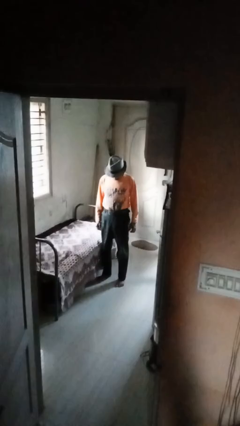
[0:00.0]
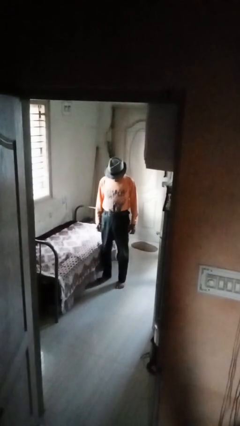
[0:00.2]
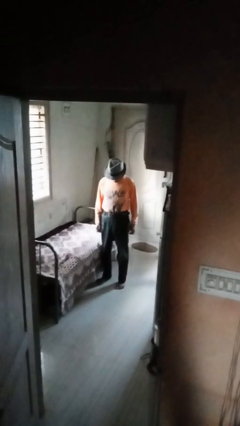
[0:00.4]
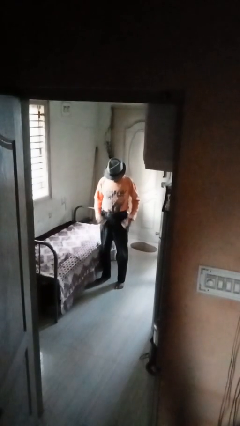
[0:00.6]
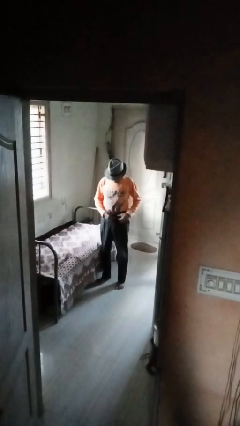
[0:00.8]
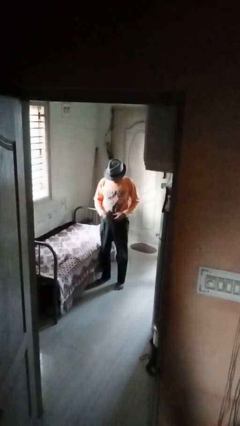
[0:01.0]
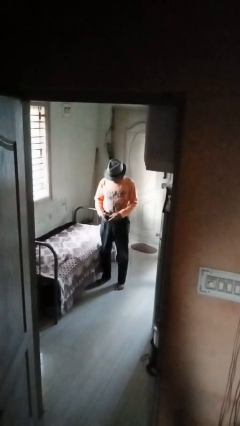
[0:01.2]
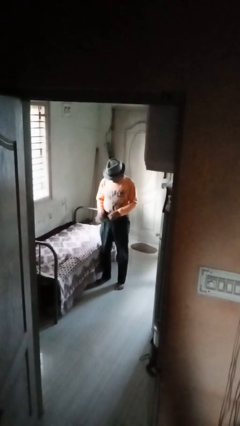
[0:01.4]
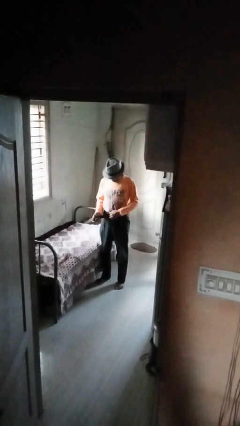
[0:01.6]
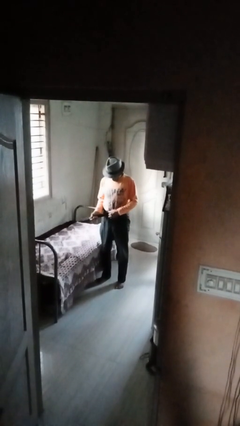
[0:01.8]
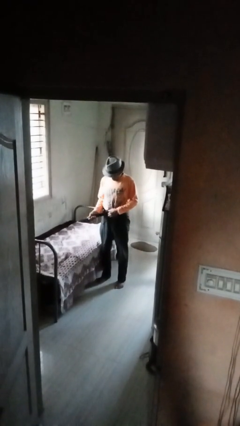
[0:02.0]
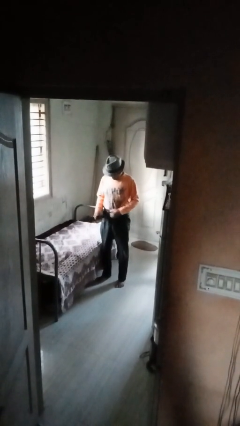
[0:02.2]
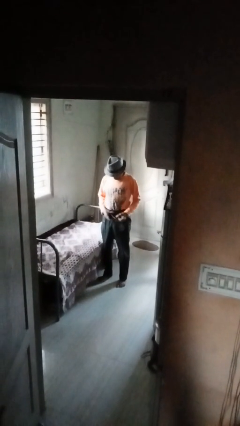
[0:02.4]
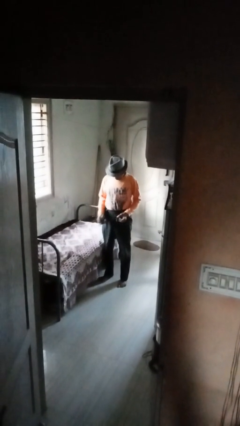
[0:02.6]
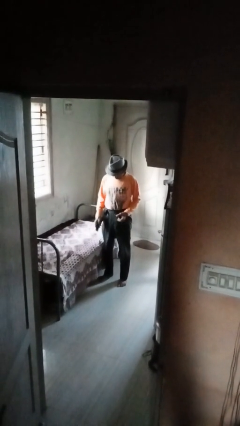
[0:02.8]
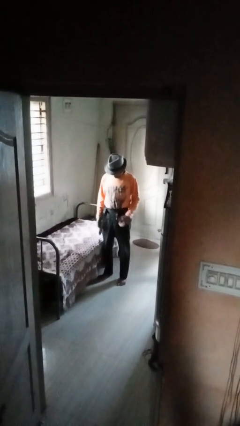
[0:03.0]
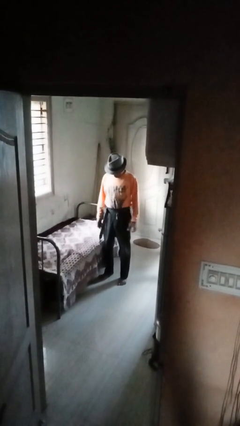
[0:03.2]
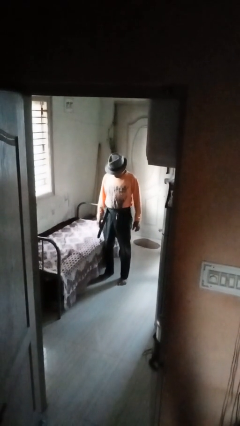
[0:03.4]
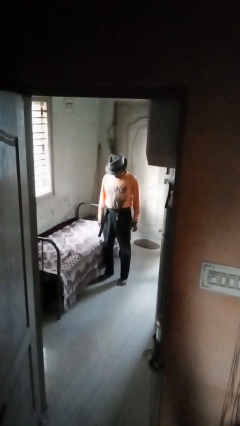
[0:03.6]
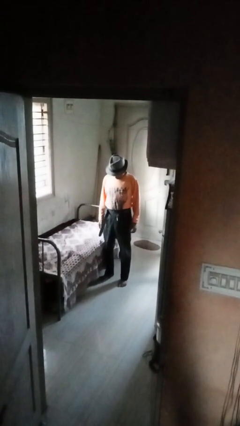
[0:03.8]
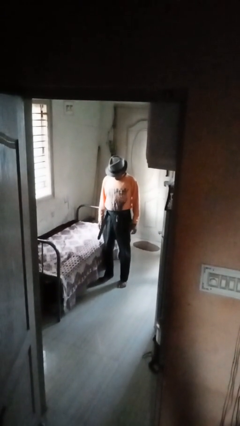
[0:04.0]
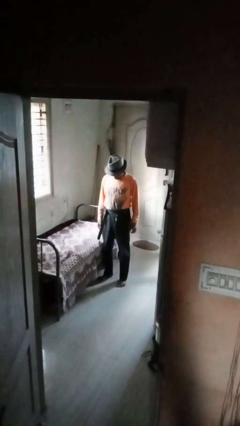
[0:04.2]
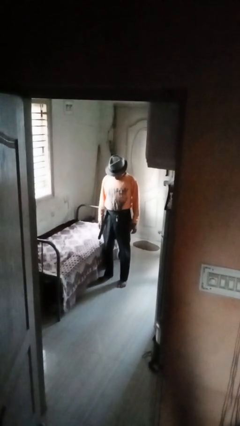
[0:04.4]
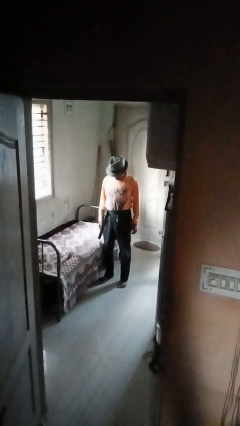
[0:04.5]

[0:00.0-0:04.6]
person takes off belt

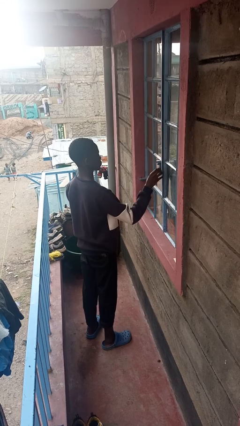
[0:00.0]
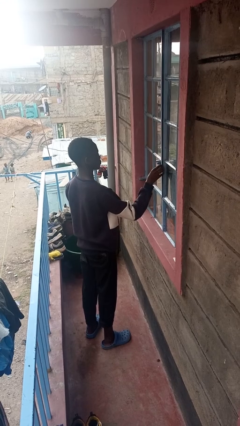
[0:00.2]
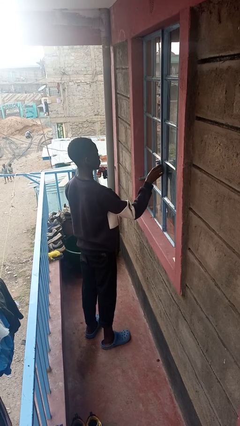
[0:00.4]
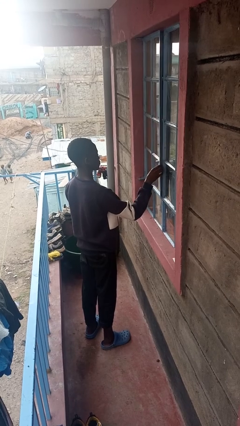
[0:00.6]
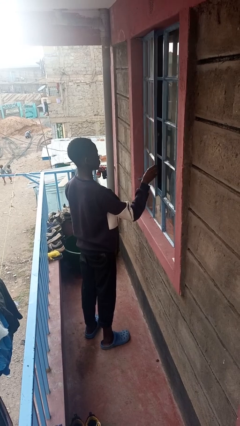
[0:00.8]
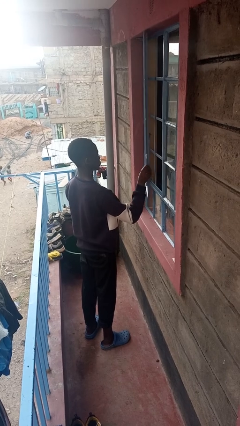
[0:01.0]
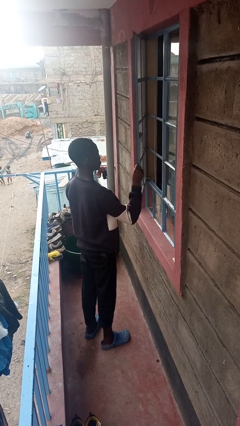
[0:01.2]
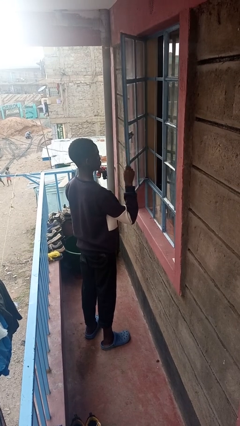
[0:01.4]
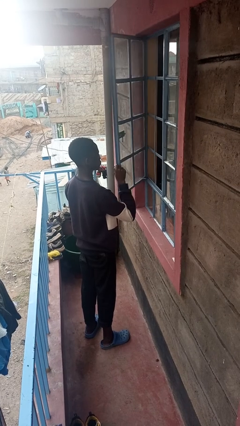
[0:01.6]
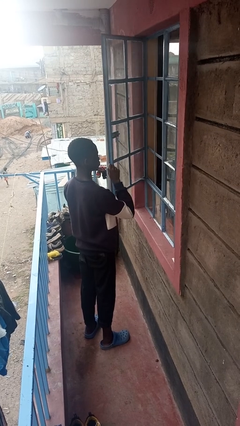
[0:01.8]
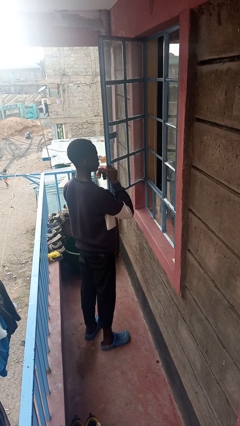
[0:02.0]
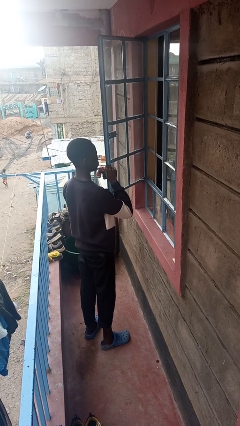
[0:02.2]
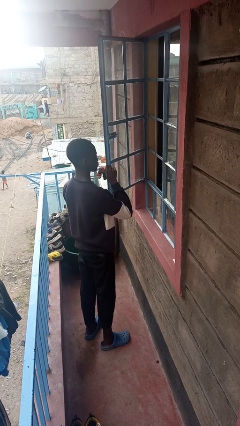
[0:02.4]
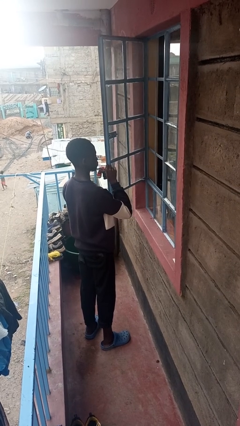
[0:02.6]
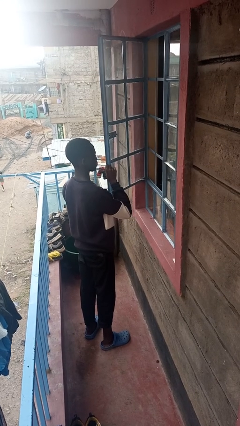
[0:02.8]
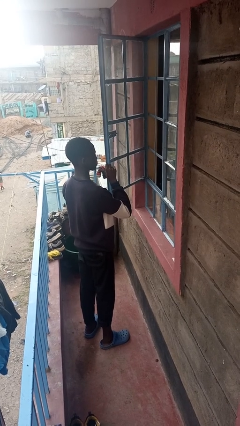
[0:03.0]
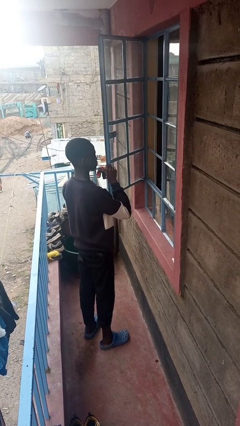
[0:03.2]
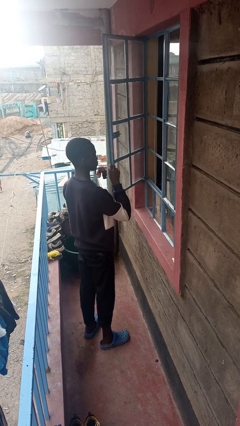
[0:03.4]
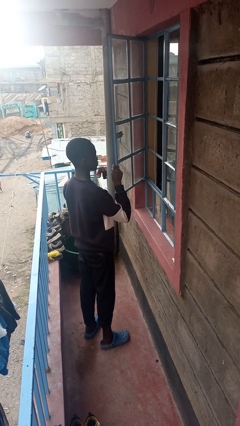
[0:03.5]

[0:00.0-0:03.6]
person opens home window

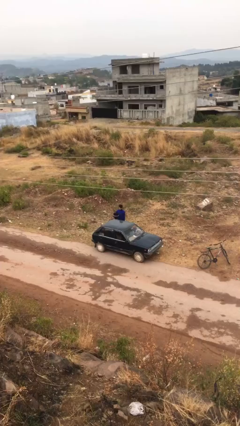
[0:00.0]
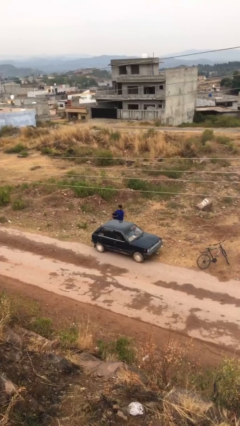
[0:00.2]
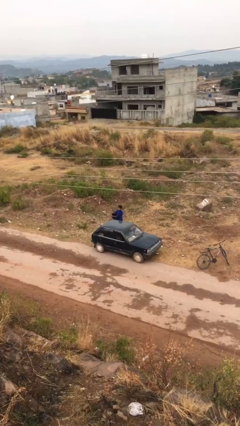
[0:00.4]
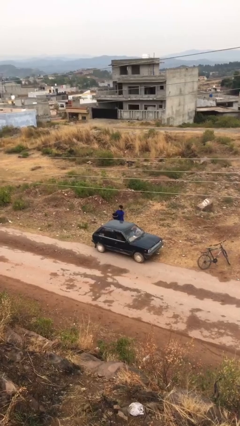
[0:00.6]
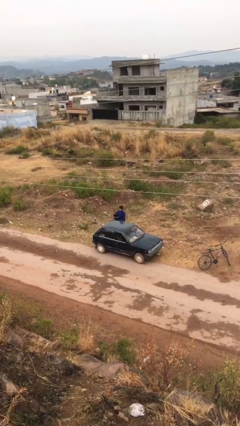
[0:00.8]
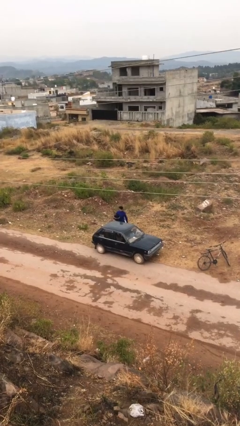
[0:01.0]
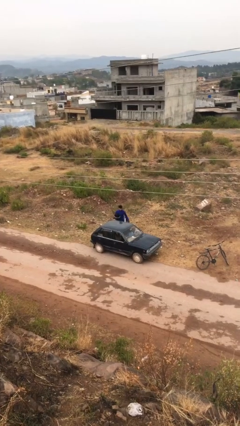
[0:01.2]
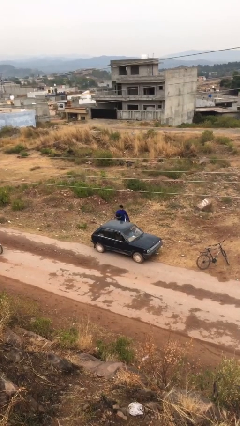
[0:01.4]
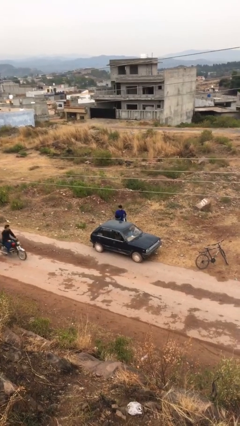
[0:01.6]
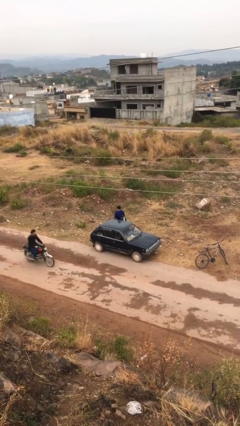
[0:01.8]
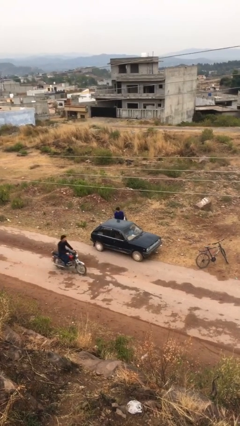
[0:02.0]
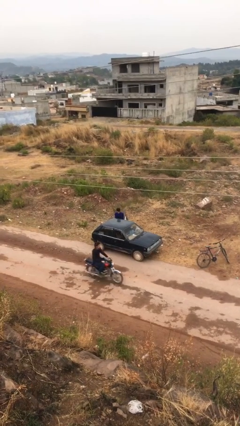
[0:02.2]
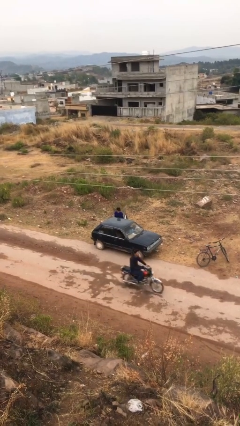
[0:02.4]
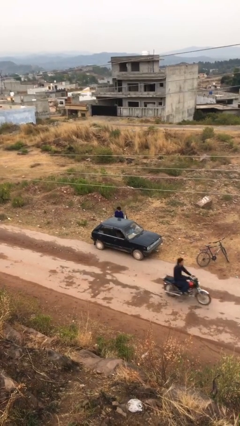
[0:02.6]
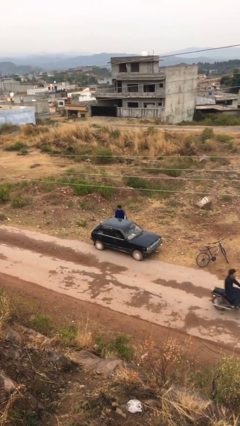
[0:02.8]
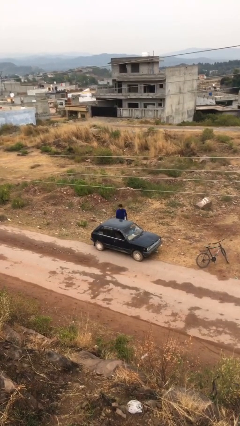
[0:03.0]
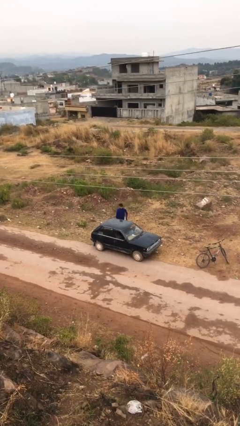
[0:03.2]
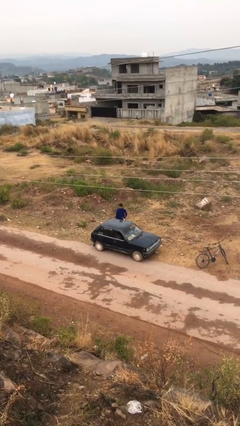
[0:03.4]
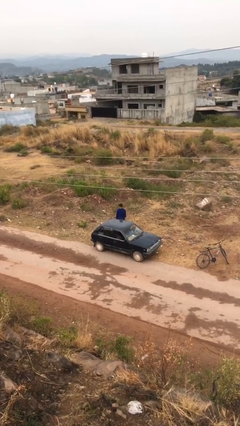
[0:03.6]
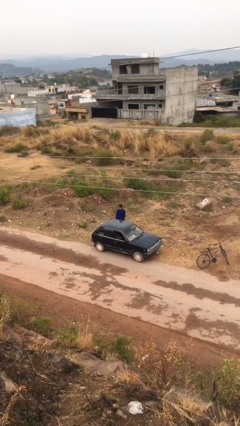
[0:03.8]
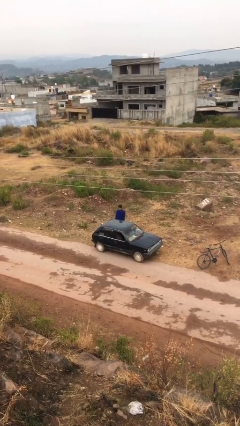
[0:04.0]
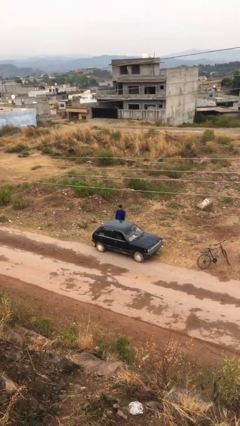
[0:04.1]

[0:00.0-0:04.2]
person loads car

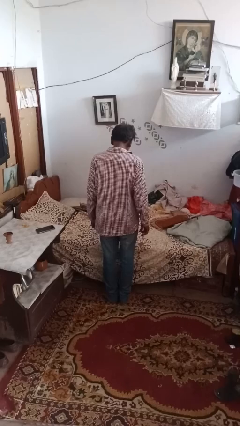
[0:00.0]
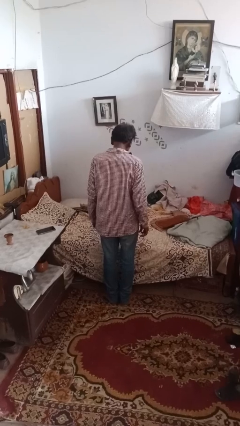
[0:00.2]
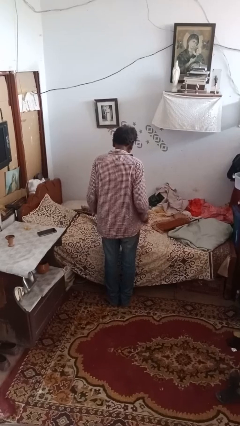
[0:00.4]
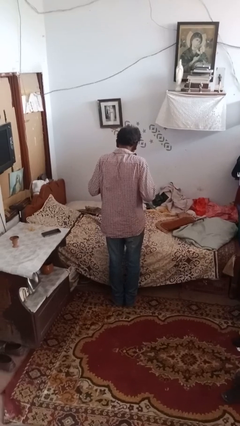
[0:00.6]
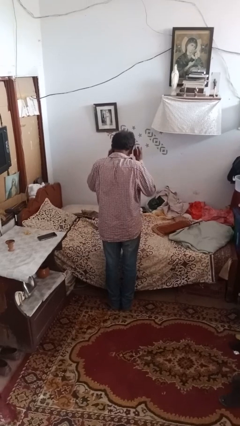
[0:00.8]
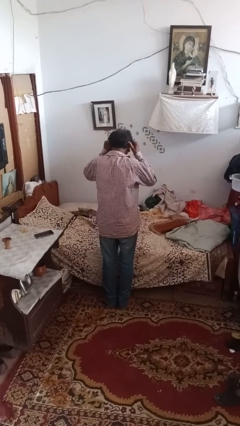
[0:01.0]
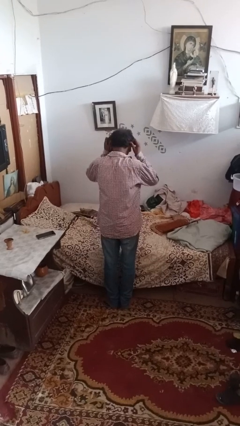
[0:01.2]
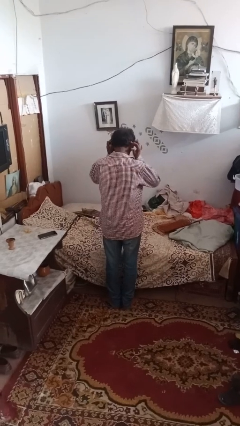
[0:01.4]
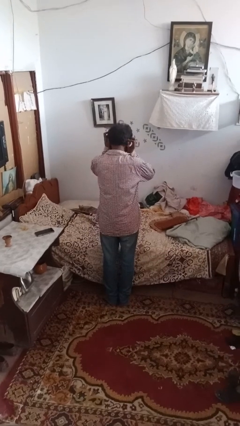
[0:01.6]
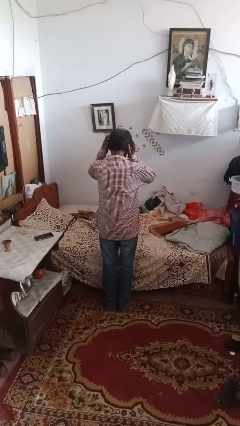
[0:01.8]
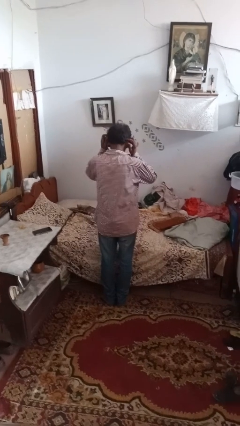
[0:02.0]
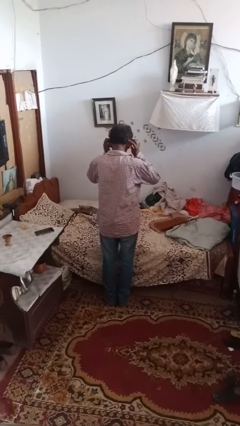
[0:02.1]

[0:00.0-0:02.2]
person touches earlobe

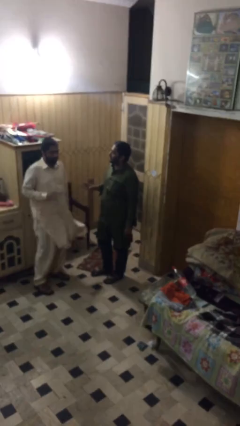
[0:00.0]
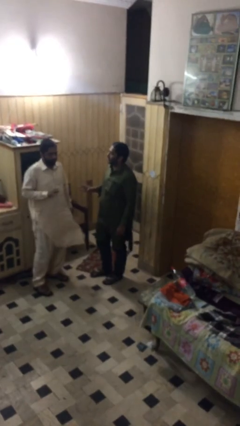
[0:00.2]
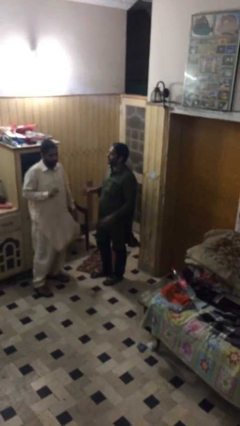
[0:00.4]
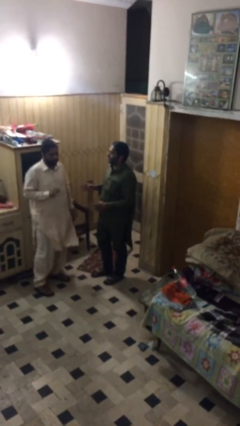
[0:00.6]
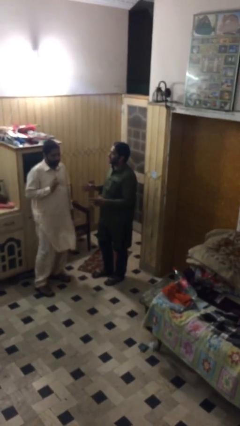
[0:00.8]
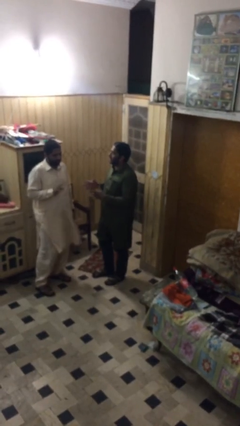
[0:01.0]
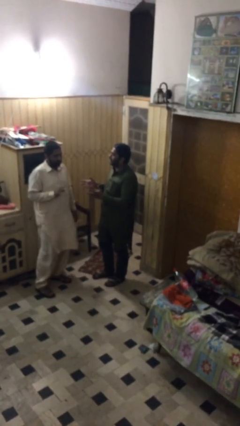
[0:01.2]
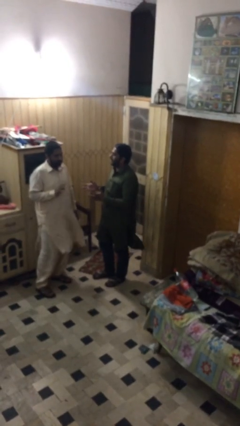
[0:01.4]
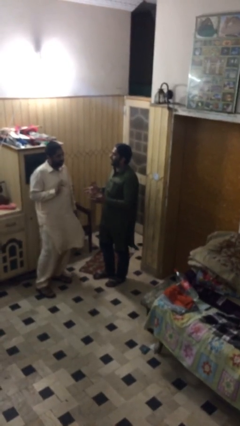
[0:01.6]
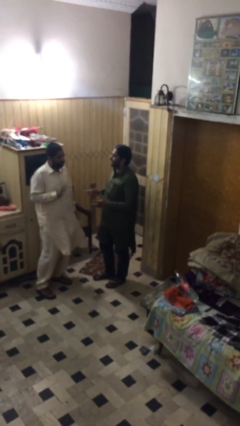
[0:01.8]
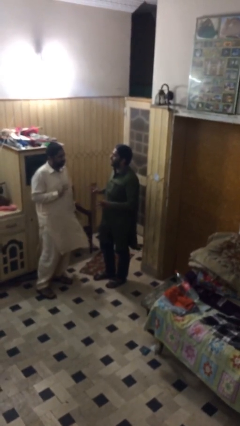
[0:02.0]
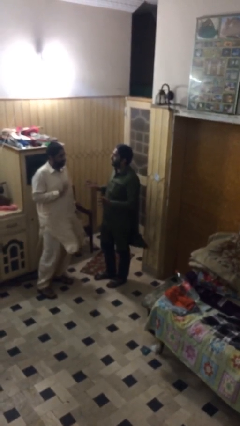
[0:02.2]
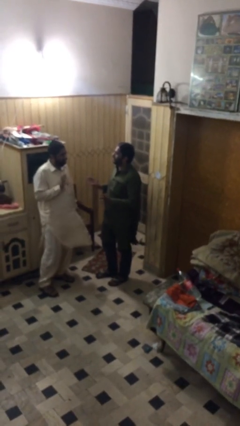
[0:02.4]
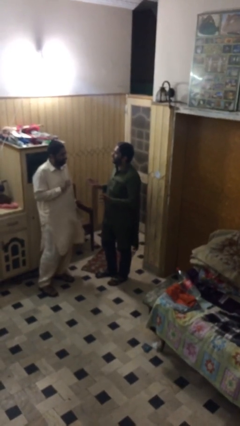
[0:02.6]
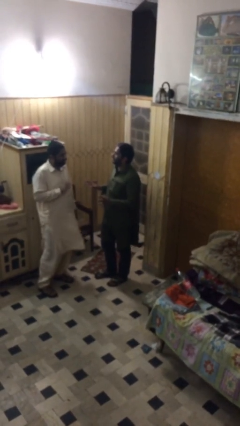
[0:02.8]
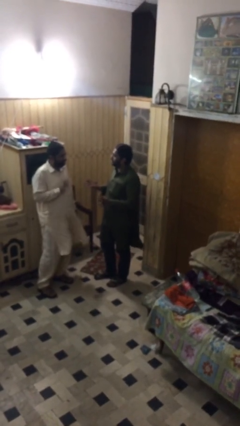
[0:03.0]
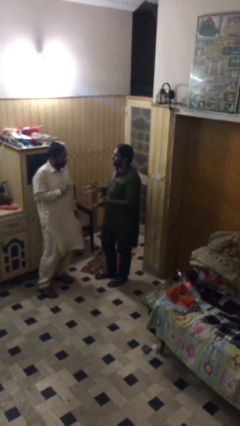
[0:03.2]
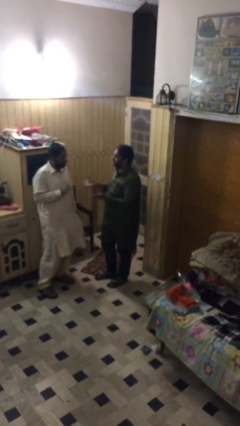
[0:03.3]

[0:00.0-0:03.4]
person talks to person
